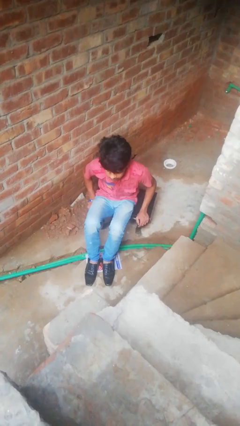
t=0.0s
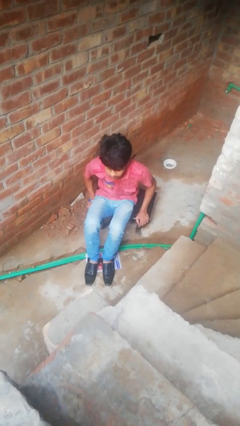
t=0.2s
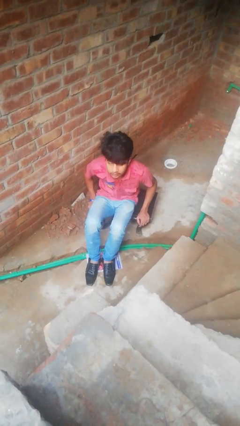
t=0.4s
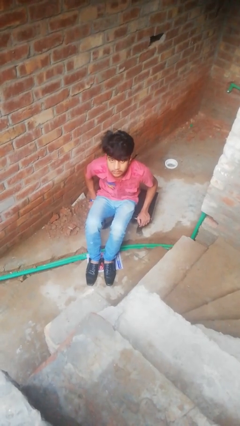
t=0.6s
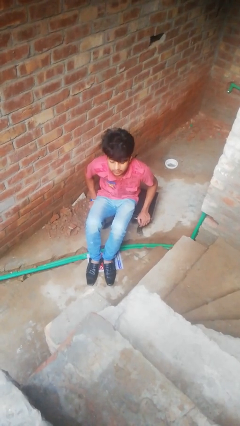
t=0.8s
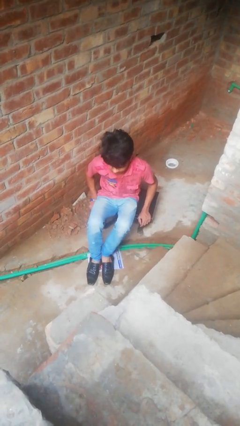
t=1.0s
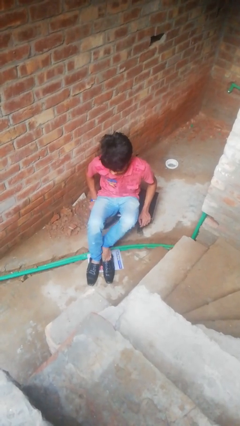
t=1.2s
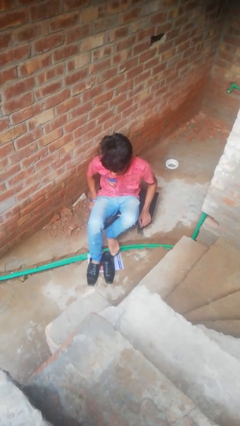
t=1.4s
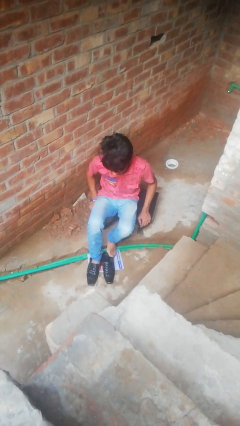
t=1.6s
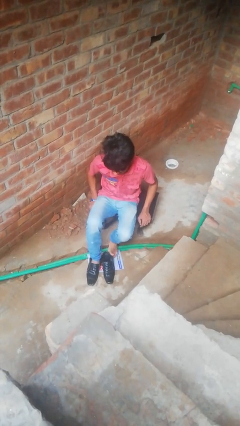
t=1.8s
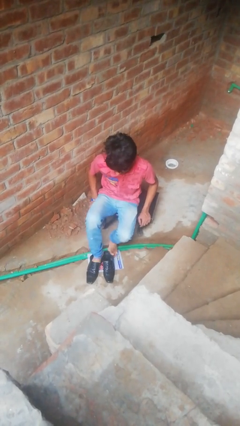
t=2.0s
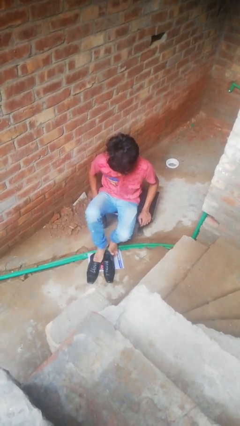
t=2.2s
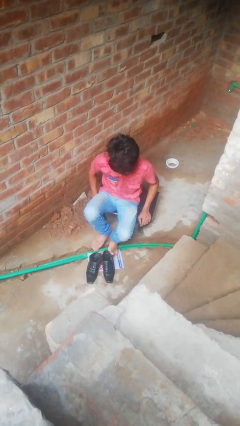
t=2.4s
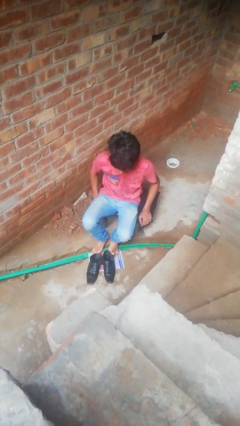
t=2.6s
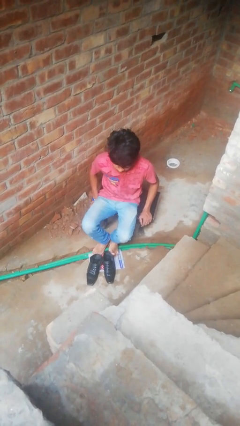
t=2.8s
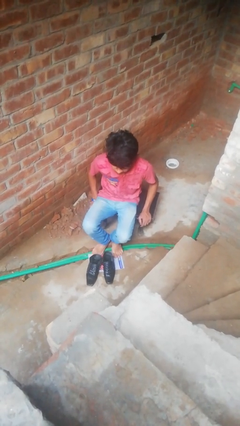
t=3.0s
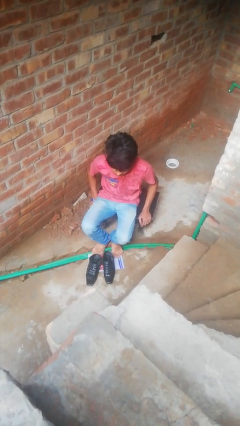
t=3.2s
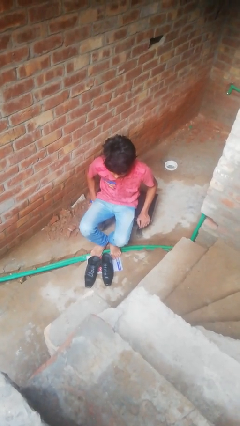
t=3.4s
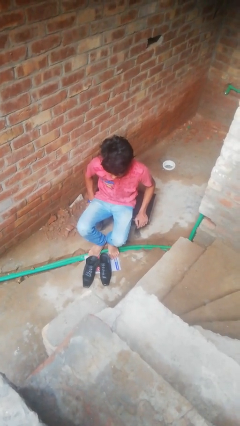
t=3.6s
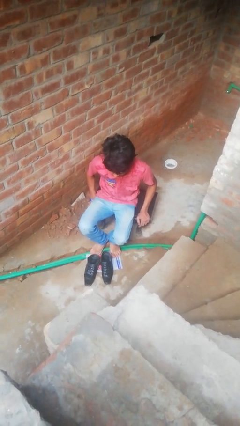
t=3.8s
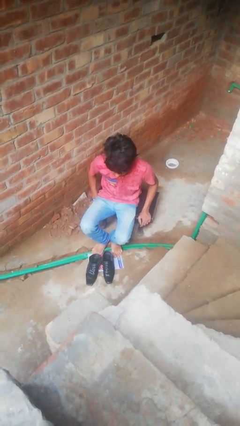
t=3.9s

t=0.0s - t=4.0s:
person takes off shoes

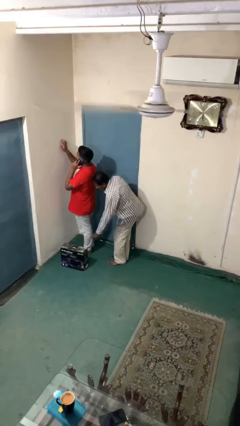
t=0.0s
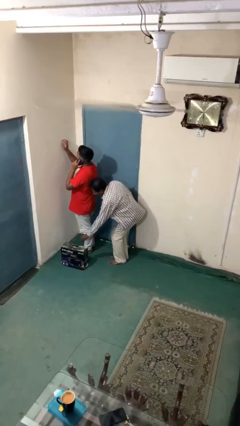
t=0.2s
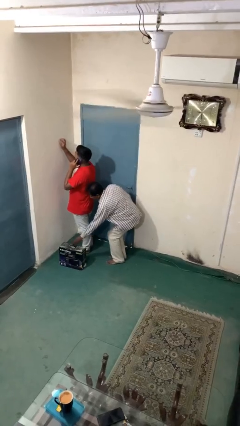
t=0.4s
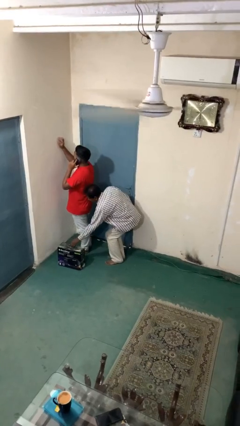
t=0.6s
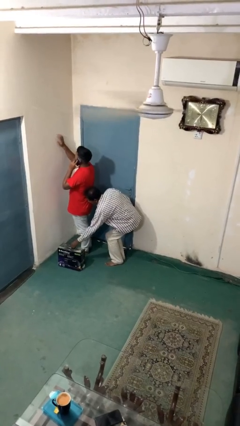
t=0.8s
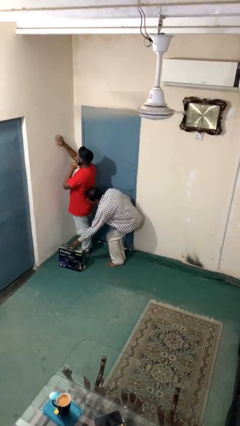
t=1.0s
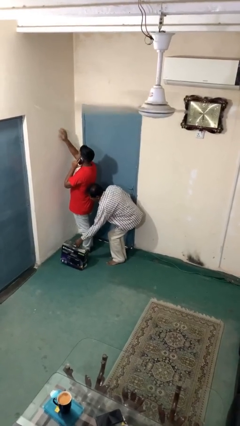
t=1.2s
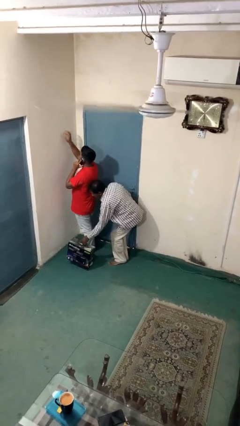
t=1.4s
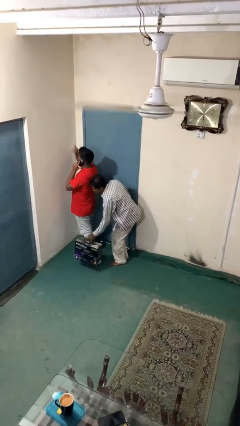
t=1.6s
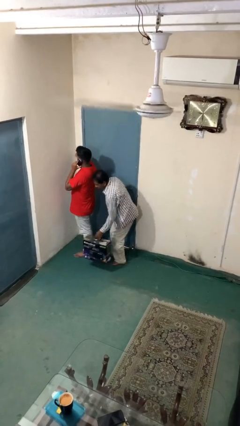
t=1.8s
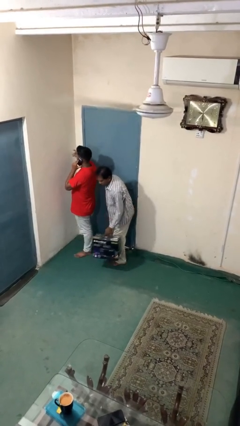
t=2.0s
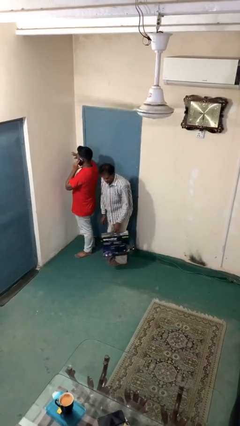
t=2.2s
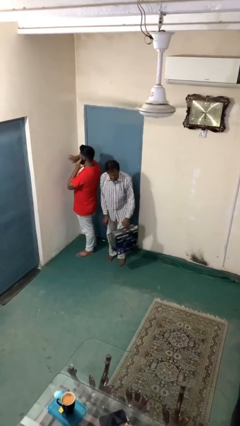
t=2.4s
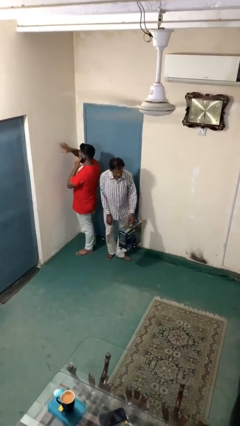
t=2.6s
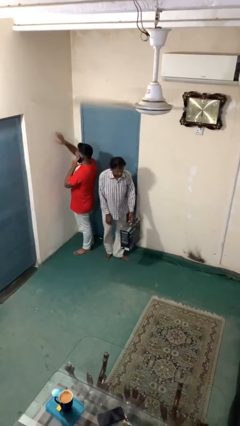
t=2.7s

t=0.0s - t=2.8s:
person steals object from person

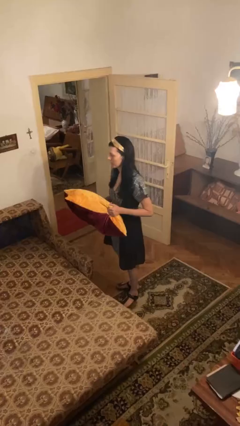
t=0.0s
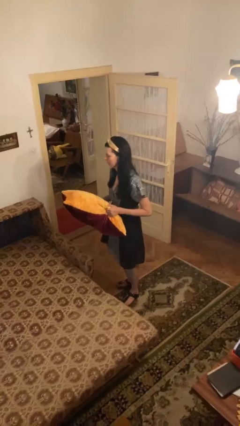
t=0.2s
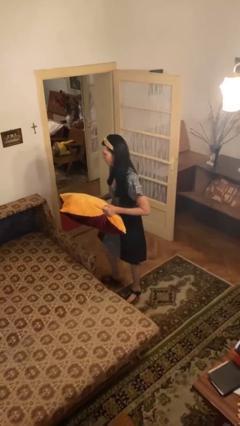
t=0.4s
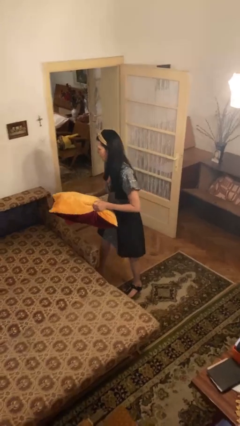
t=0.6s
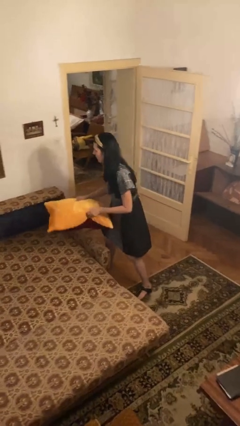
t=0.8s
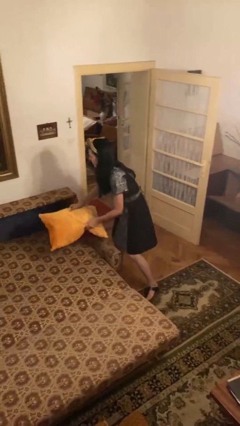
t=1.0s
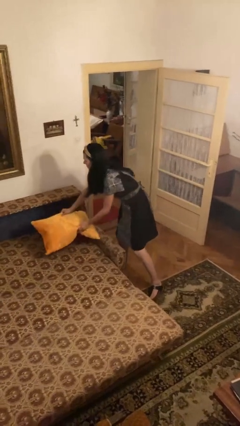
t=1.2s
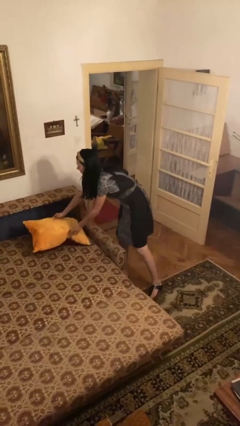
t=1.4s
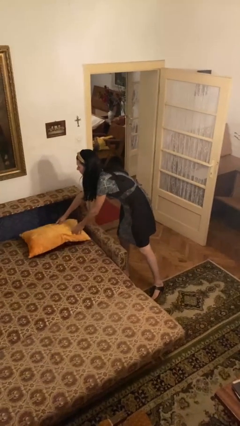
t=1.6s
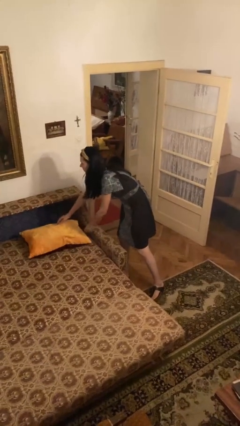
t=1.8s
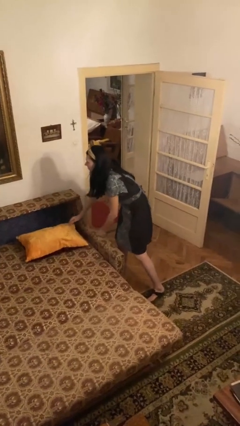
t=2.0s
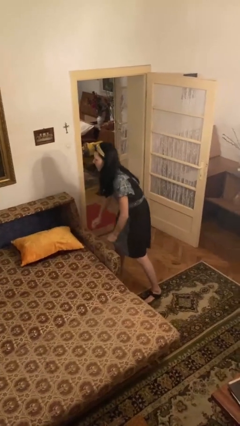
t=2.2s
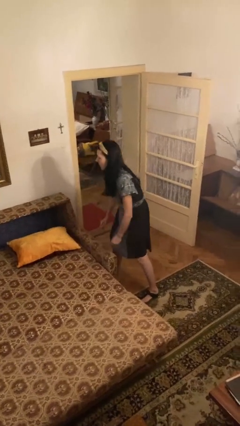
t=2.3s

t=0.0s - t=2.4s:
person puts down object on bed

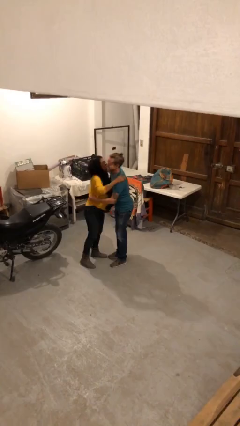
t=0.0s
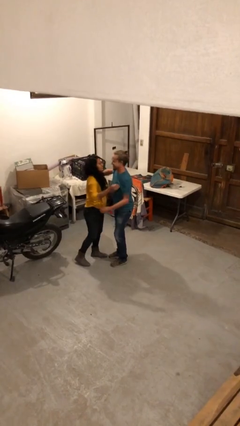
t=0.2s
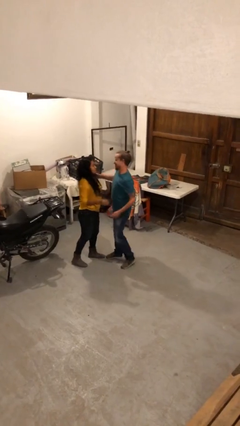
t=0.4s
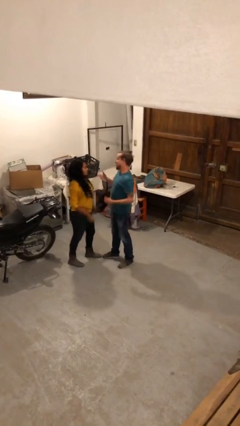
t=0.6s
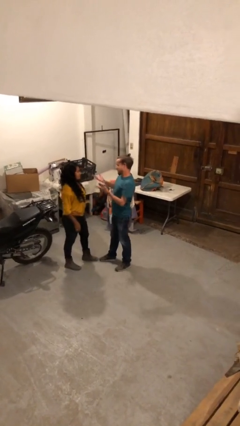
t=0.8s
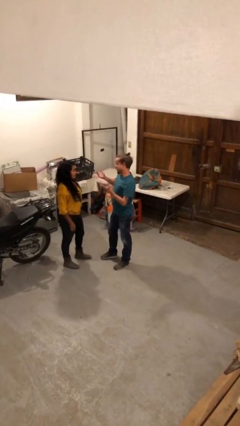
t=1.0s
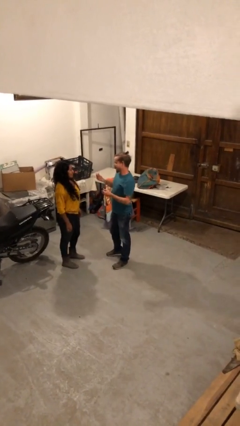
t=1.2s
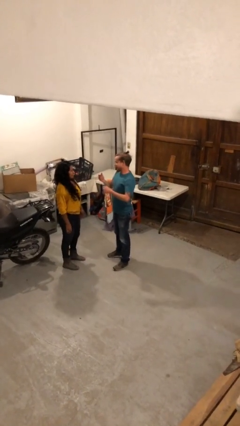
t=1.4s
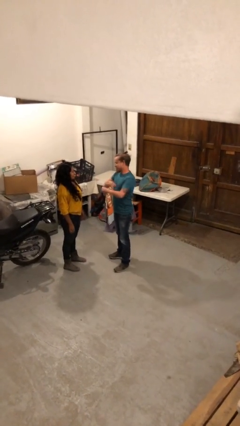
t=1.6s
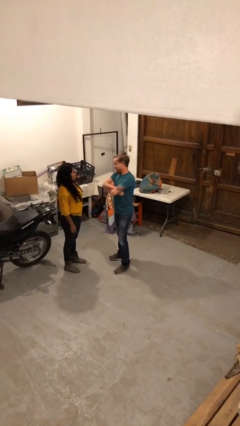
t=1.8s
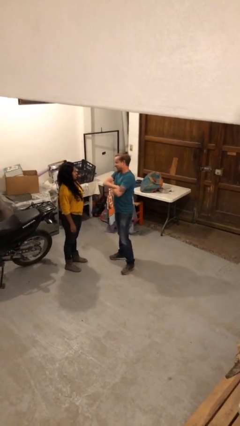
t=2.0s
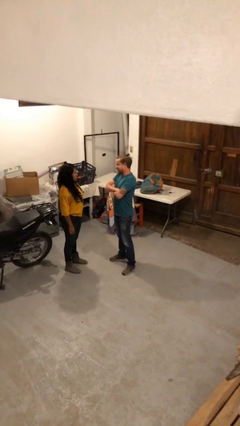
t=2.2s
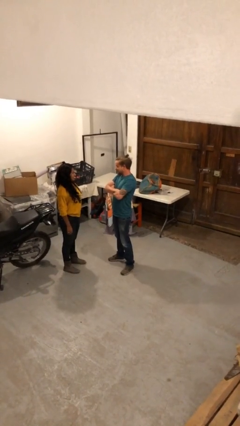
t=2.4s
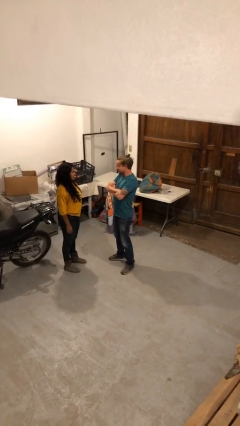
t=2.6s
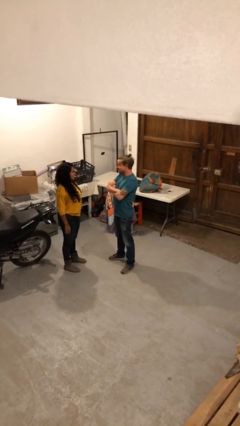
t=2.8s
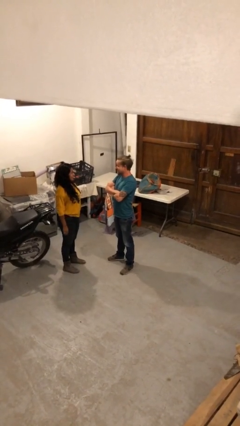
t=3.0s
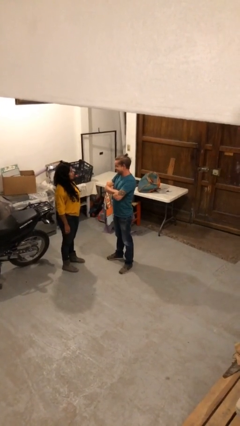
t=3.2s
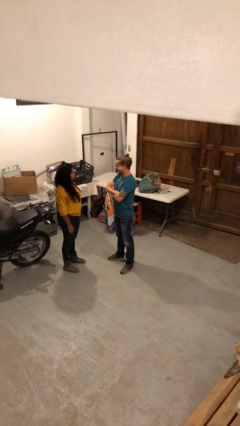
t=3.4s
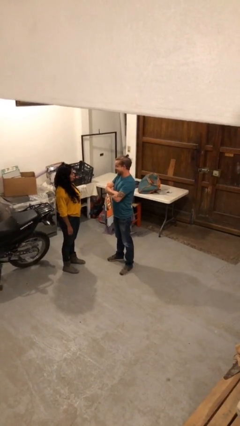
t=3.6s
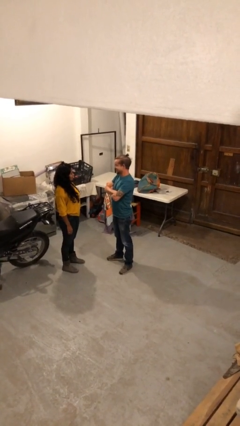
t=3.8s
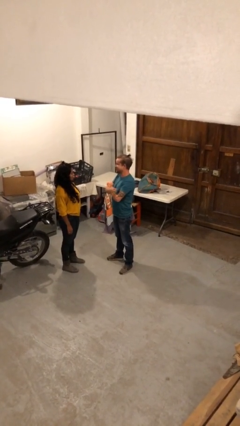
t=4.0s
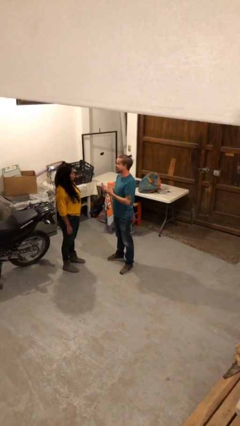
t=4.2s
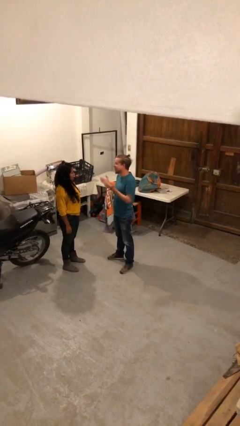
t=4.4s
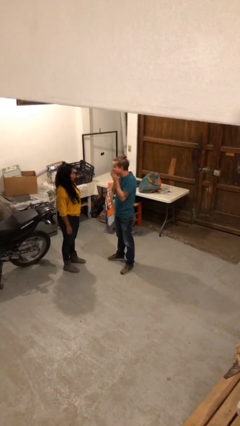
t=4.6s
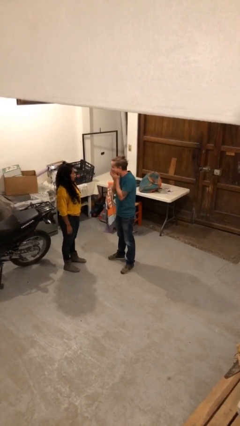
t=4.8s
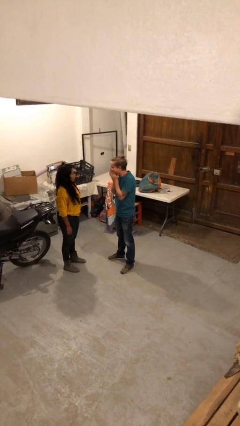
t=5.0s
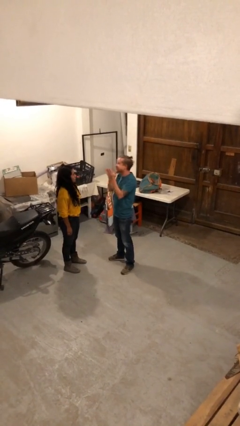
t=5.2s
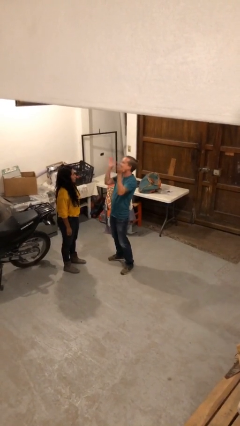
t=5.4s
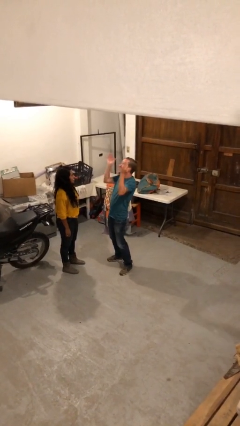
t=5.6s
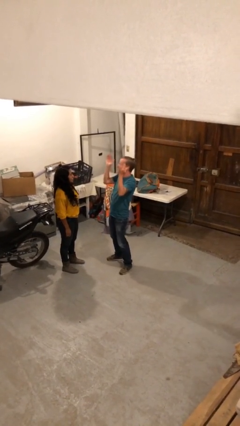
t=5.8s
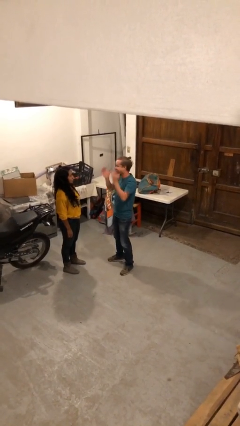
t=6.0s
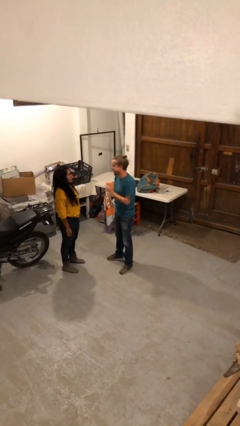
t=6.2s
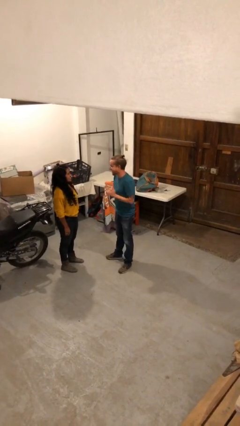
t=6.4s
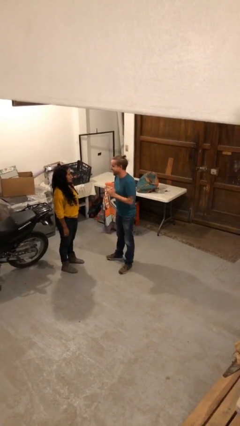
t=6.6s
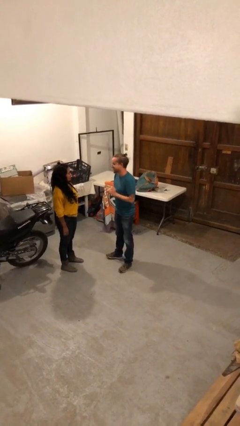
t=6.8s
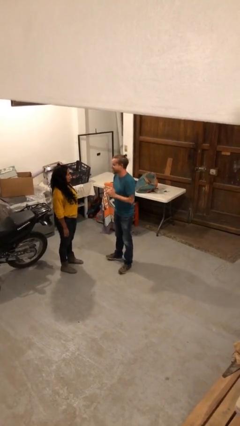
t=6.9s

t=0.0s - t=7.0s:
person talks to person

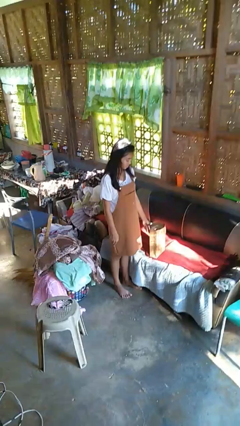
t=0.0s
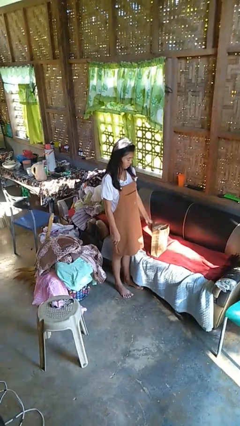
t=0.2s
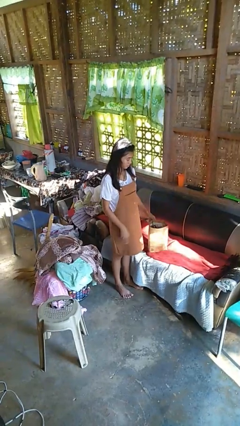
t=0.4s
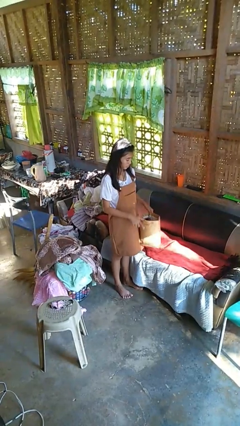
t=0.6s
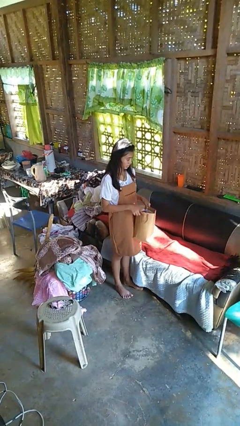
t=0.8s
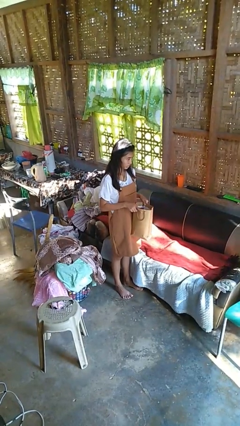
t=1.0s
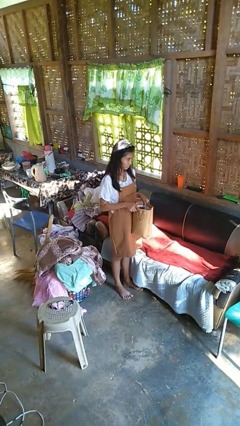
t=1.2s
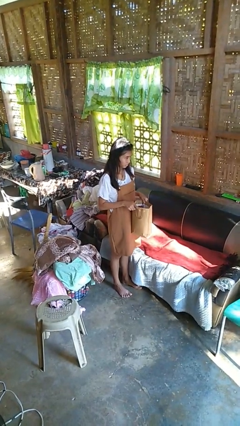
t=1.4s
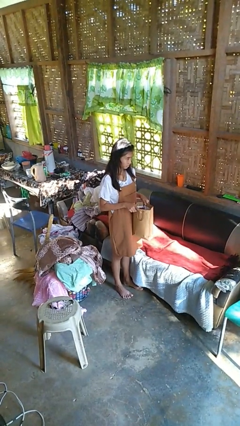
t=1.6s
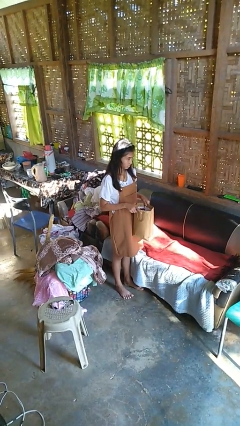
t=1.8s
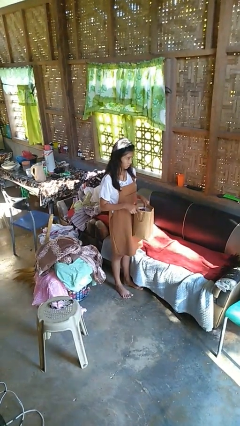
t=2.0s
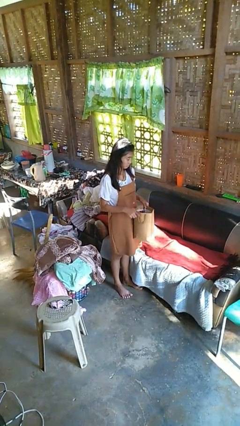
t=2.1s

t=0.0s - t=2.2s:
person picks up object from couch
